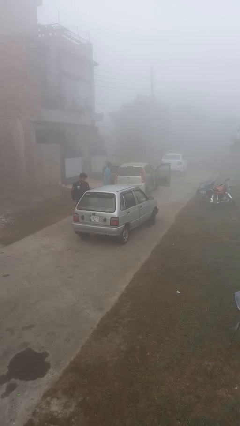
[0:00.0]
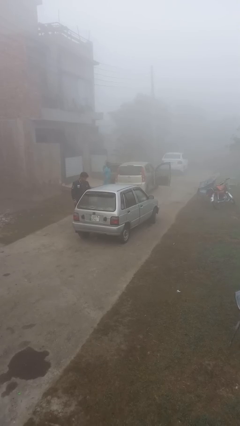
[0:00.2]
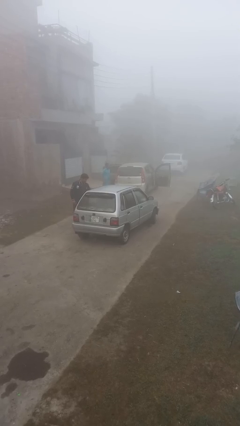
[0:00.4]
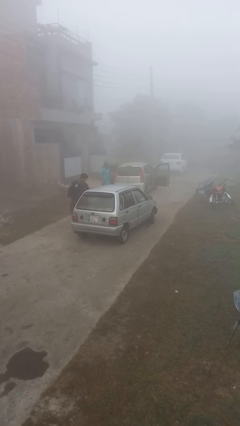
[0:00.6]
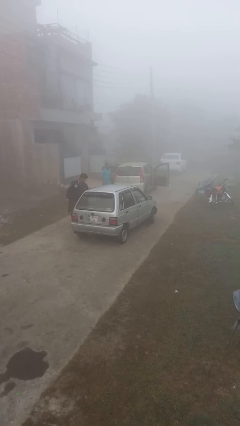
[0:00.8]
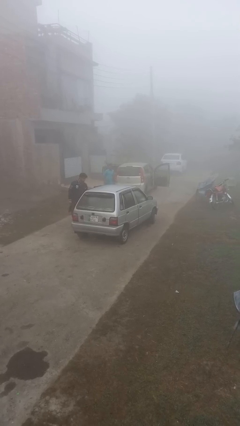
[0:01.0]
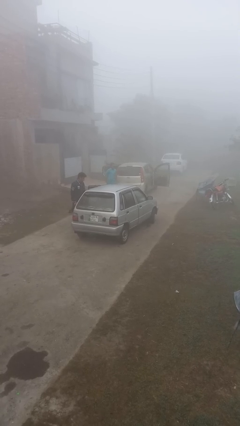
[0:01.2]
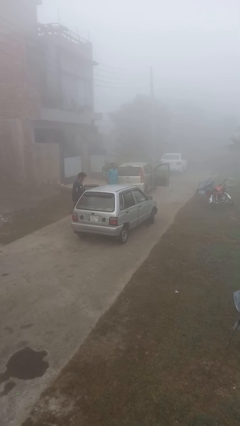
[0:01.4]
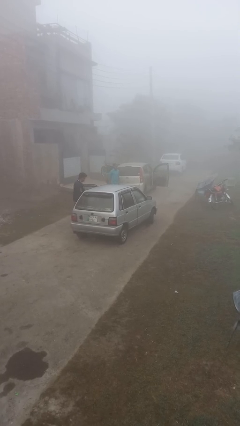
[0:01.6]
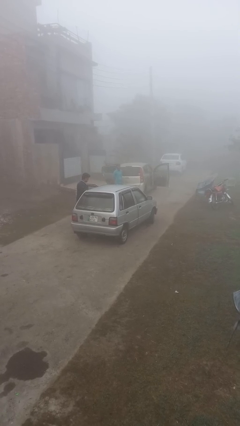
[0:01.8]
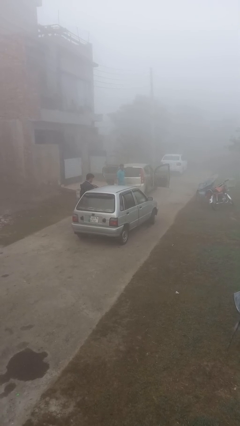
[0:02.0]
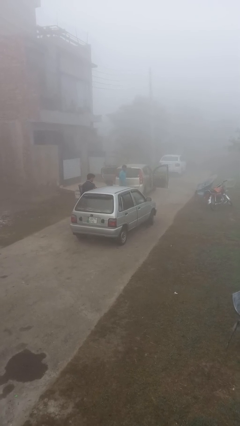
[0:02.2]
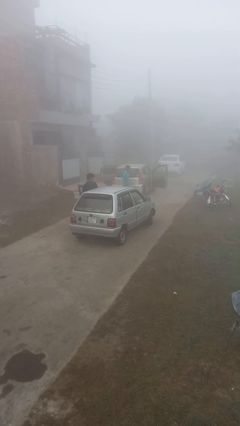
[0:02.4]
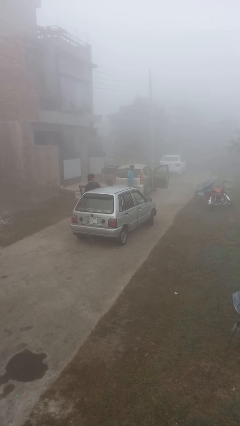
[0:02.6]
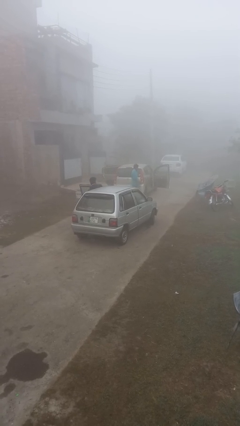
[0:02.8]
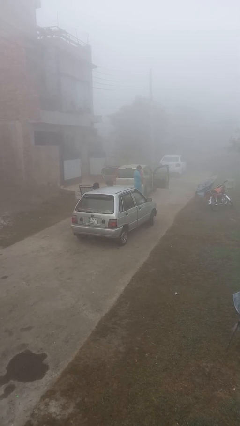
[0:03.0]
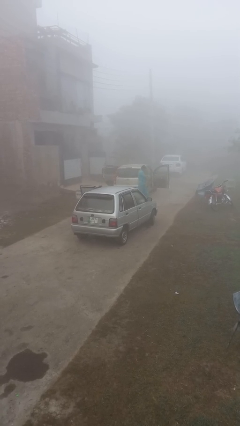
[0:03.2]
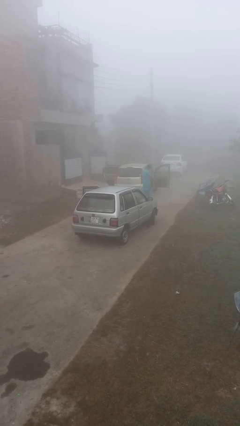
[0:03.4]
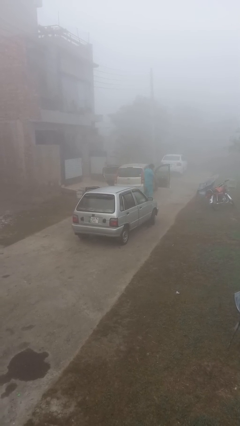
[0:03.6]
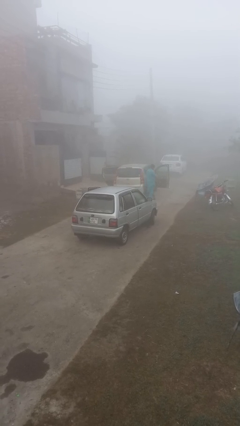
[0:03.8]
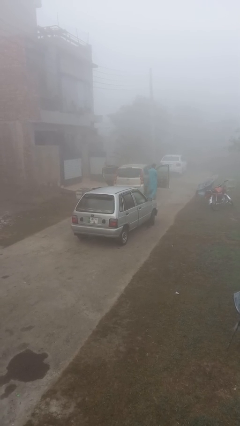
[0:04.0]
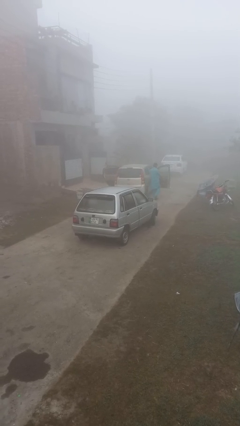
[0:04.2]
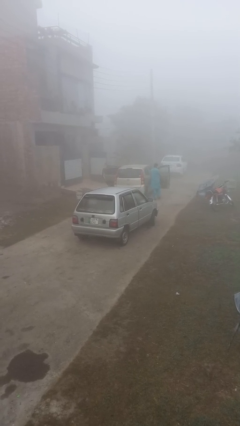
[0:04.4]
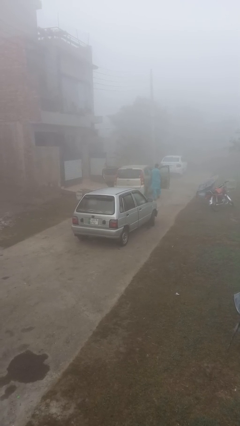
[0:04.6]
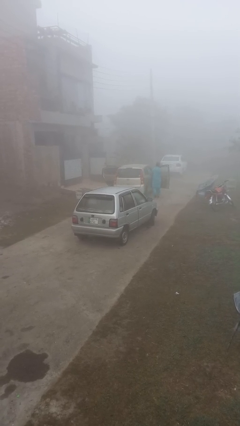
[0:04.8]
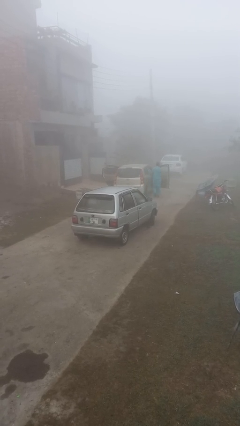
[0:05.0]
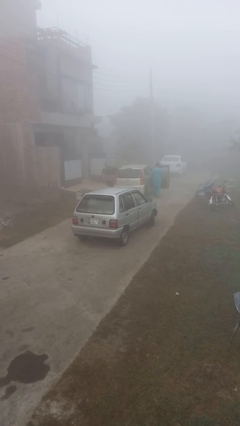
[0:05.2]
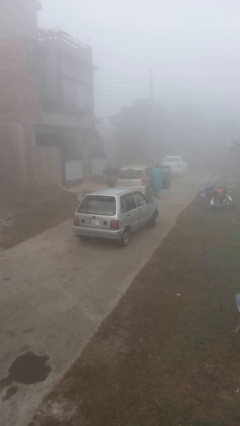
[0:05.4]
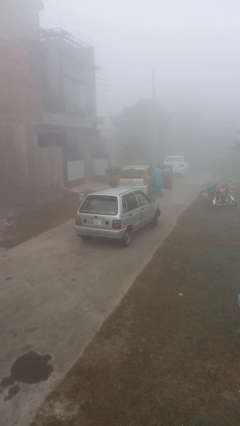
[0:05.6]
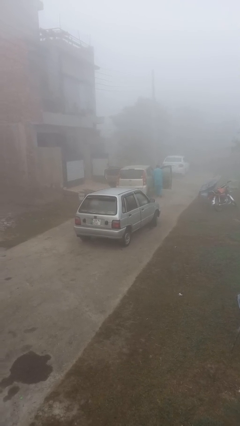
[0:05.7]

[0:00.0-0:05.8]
car picks up person

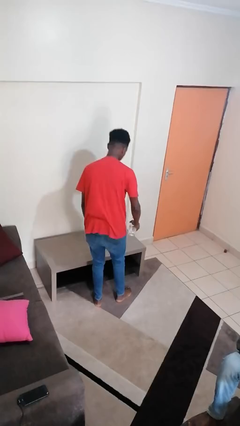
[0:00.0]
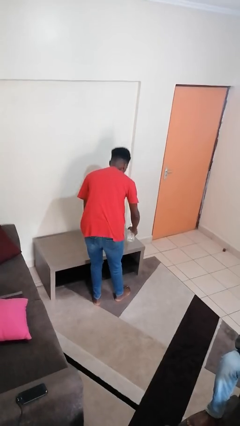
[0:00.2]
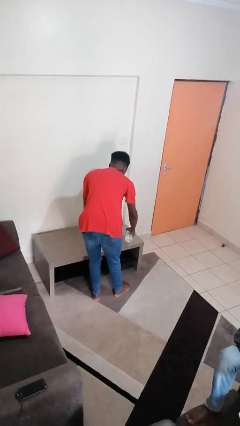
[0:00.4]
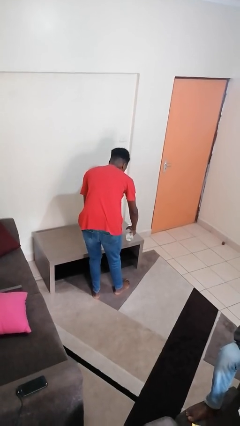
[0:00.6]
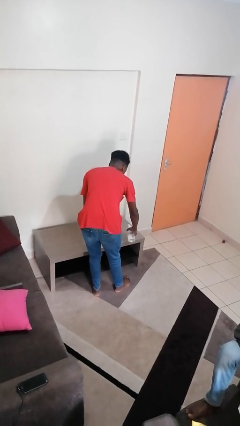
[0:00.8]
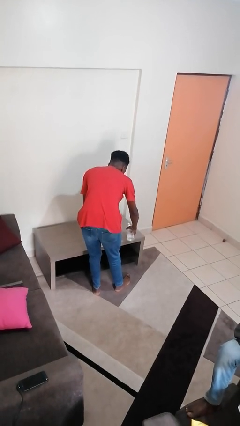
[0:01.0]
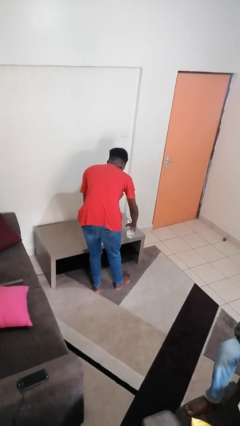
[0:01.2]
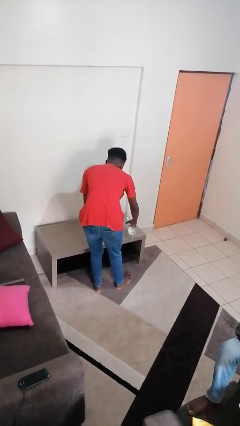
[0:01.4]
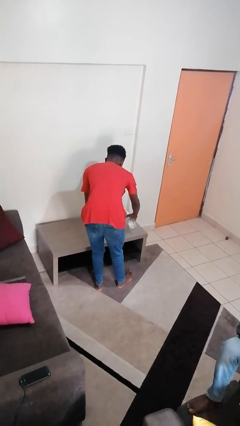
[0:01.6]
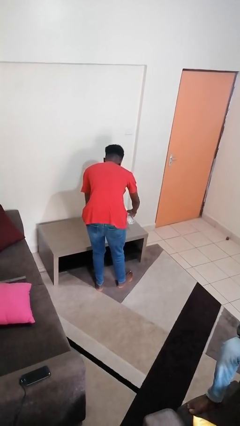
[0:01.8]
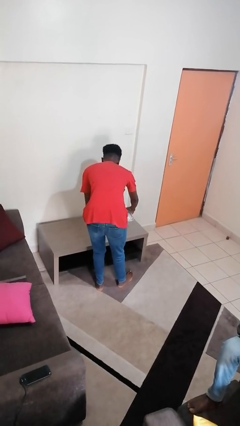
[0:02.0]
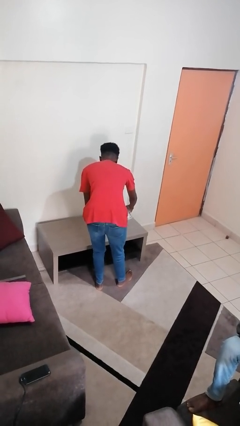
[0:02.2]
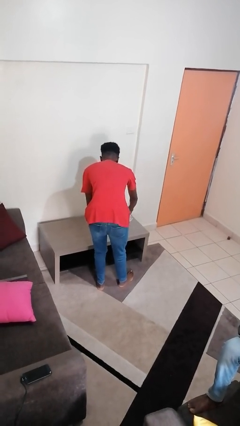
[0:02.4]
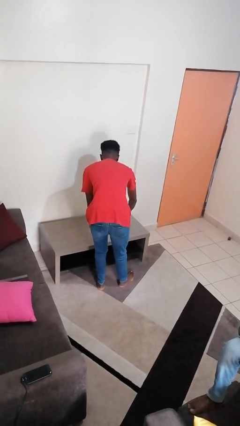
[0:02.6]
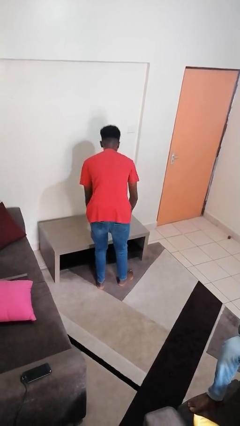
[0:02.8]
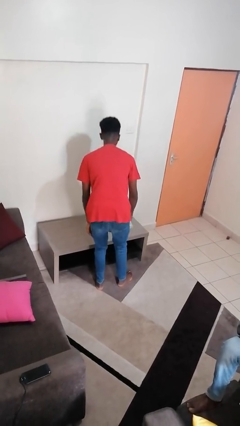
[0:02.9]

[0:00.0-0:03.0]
person sprays from bottle

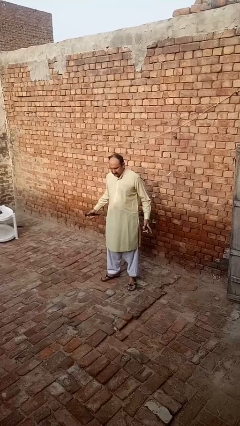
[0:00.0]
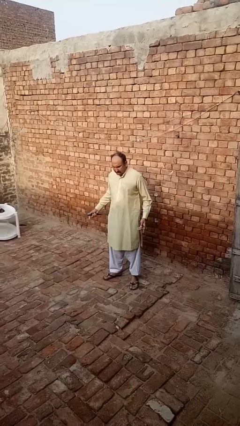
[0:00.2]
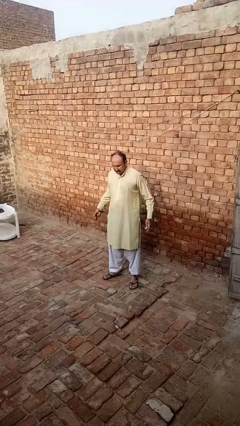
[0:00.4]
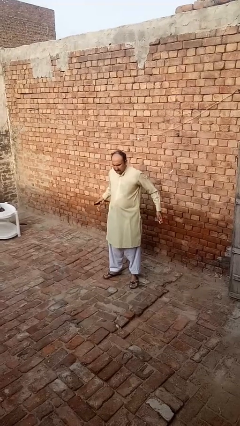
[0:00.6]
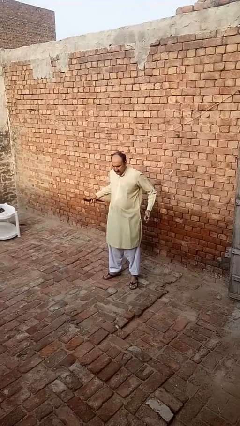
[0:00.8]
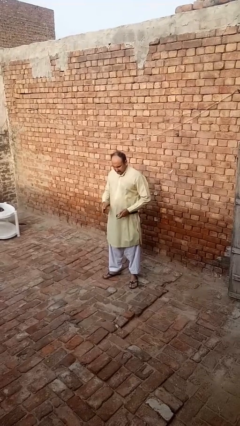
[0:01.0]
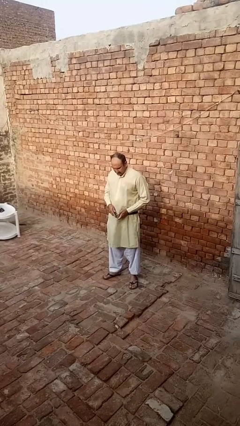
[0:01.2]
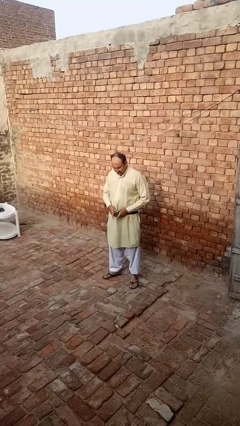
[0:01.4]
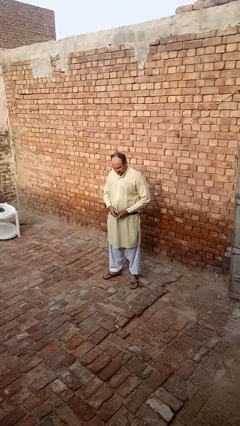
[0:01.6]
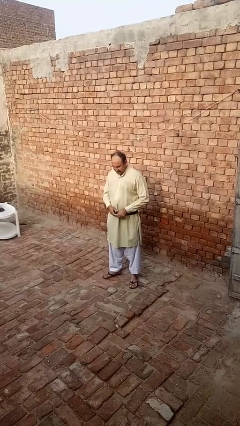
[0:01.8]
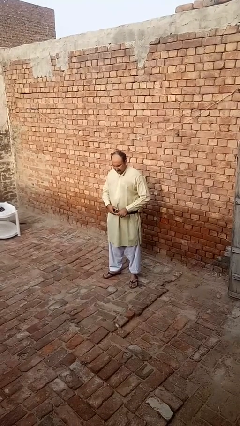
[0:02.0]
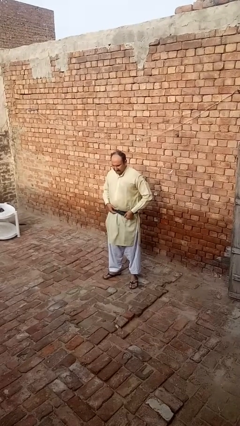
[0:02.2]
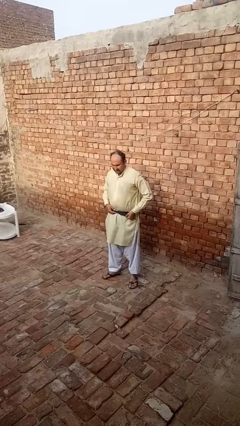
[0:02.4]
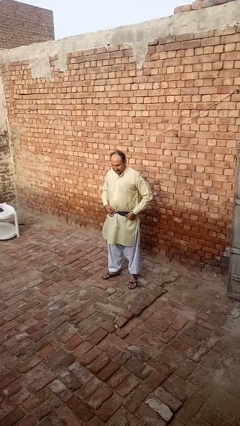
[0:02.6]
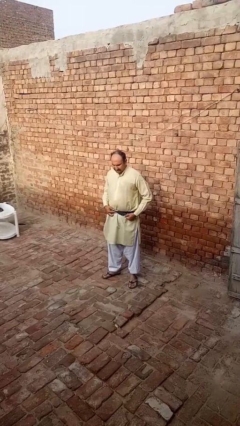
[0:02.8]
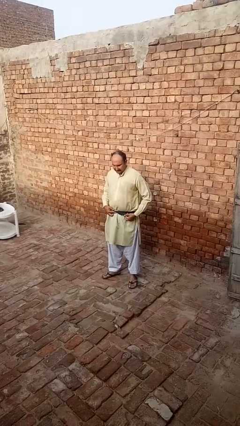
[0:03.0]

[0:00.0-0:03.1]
person puts on belt

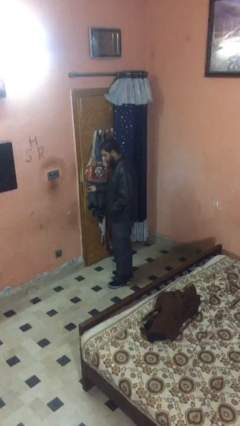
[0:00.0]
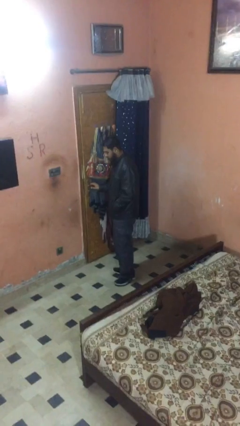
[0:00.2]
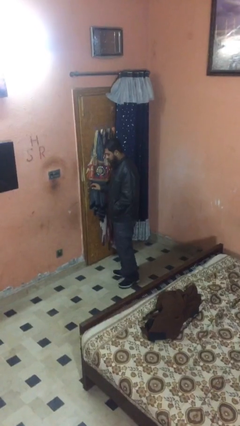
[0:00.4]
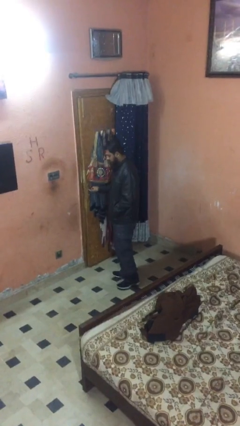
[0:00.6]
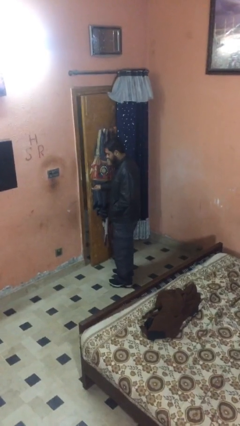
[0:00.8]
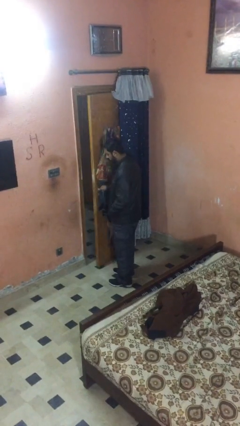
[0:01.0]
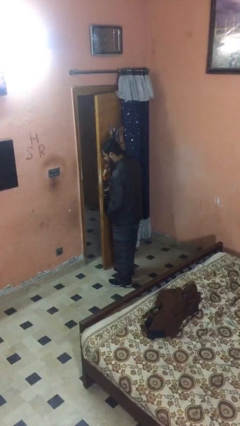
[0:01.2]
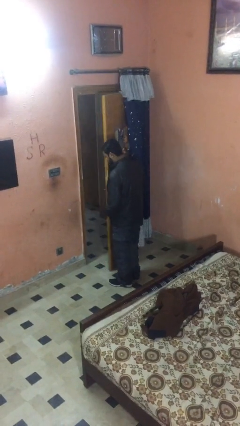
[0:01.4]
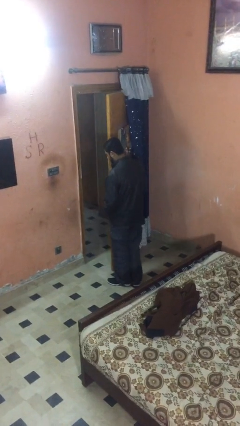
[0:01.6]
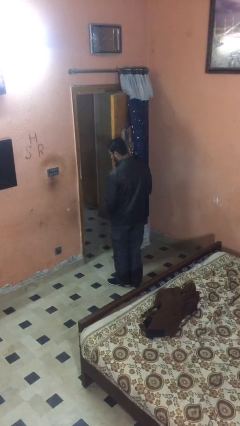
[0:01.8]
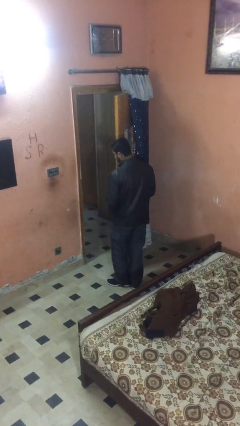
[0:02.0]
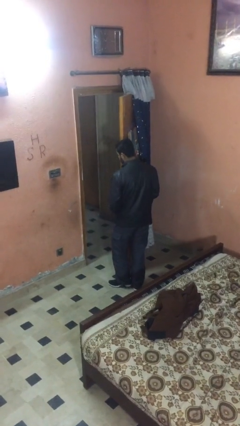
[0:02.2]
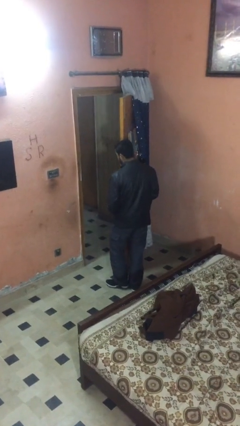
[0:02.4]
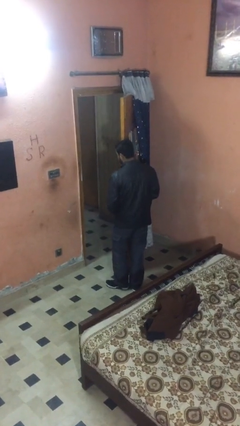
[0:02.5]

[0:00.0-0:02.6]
person opens facility door

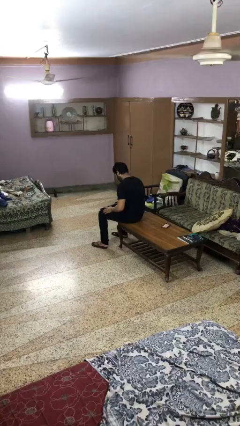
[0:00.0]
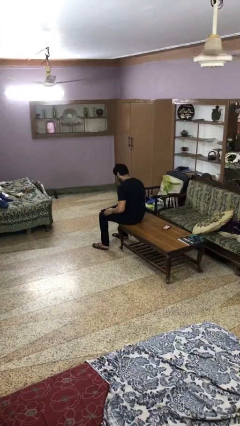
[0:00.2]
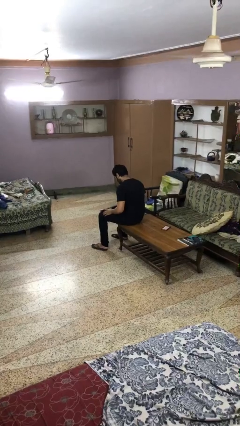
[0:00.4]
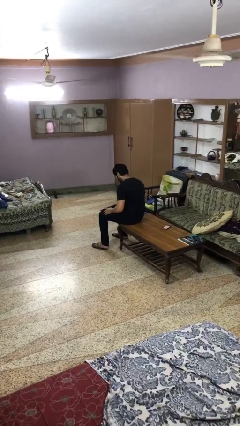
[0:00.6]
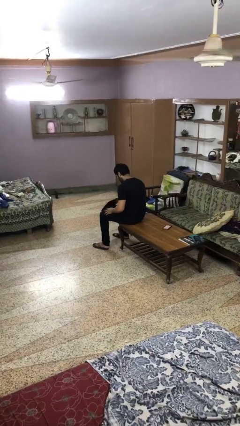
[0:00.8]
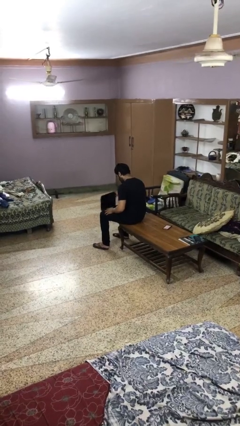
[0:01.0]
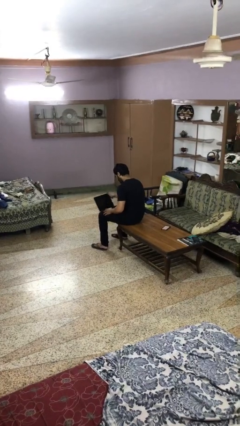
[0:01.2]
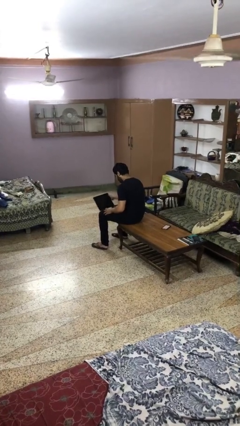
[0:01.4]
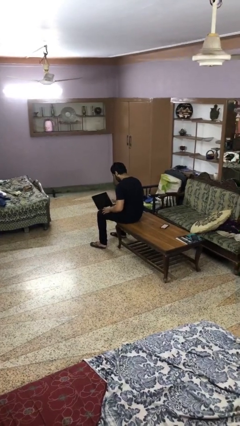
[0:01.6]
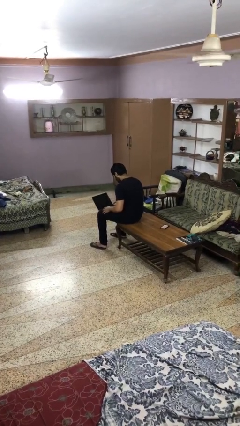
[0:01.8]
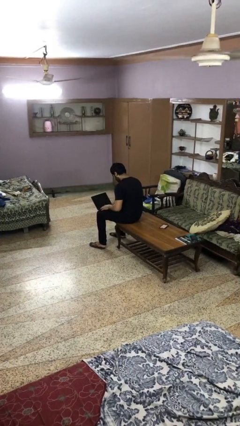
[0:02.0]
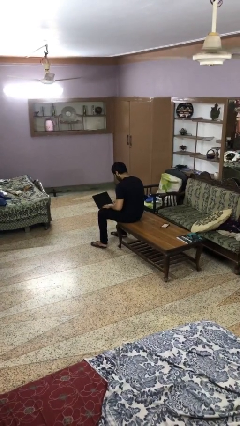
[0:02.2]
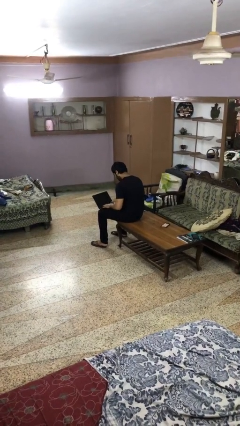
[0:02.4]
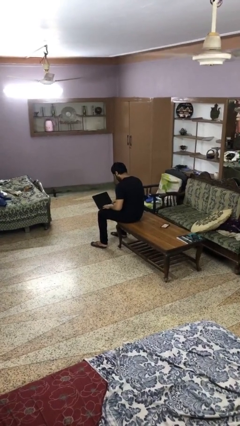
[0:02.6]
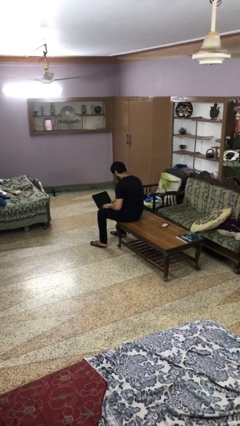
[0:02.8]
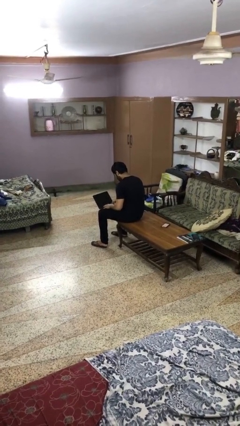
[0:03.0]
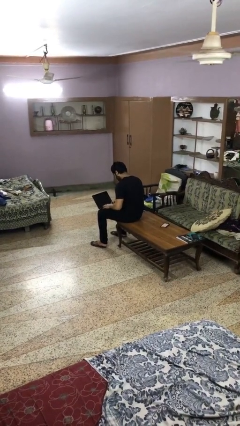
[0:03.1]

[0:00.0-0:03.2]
person opens laptop
